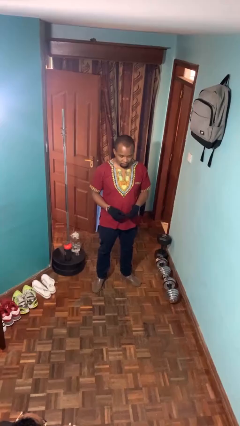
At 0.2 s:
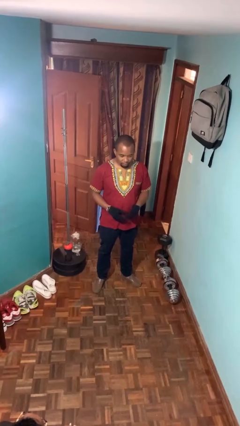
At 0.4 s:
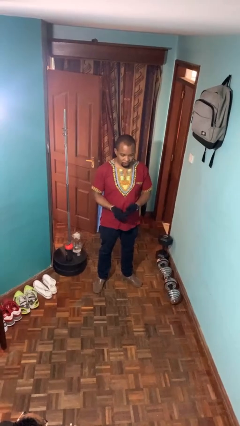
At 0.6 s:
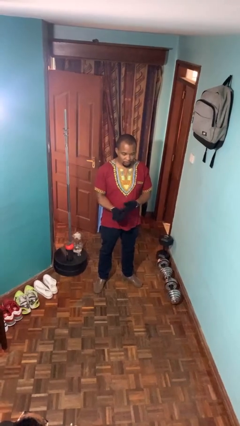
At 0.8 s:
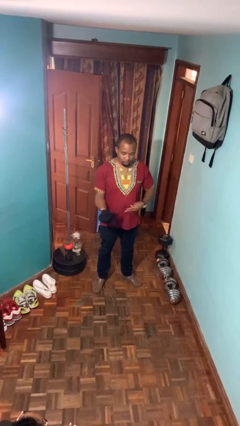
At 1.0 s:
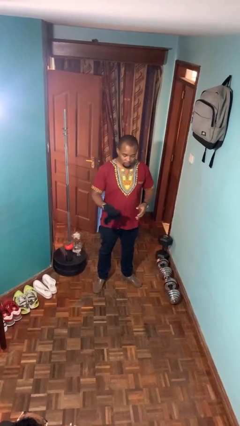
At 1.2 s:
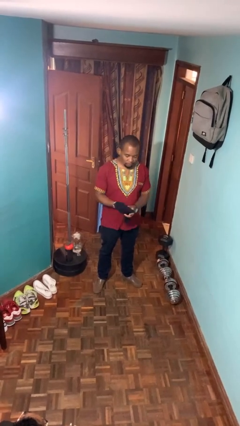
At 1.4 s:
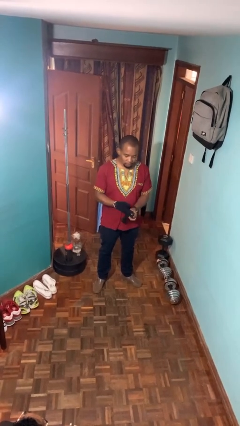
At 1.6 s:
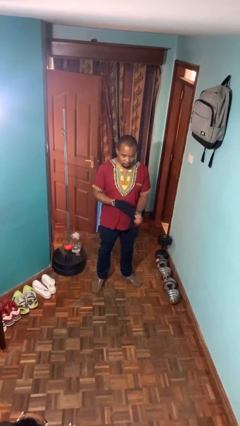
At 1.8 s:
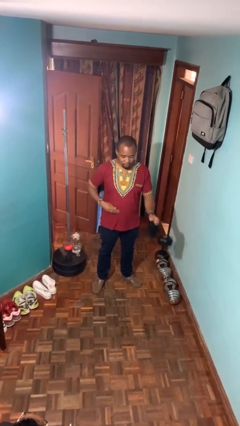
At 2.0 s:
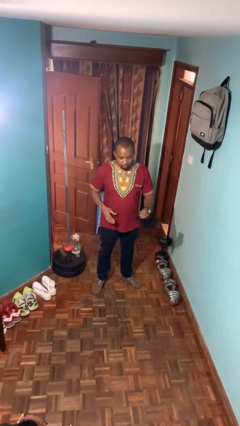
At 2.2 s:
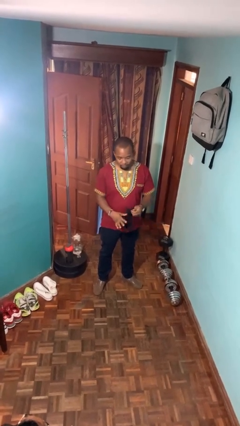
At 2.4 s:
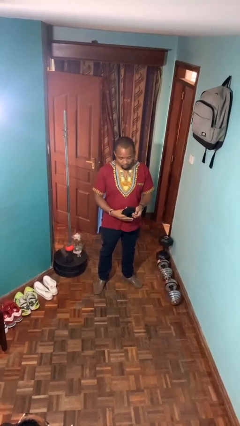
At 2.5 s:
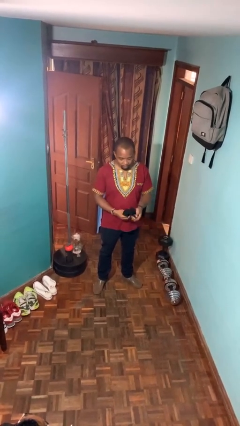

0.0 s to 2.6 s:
person takes off gloves

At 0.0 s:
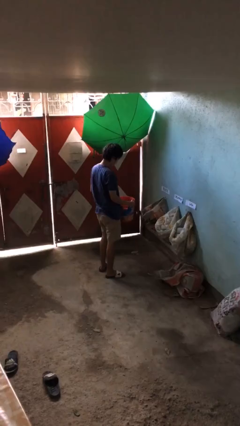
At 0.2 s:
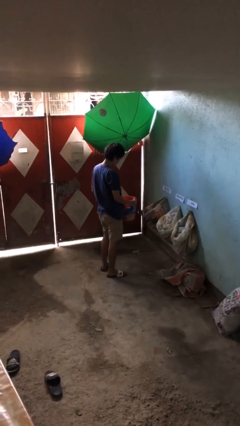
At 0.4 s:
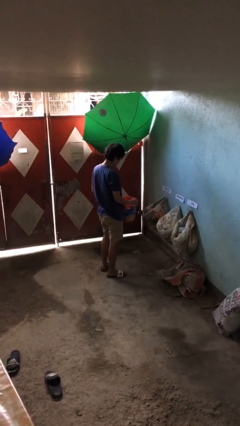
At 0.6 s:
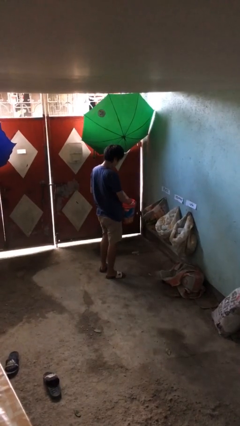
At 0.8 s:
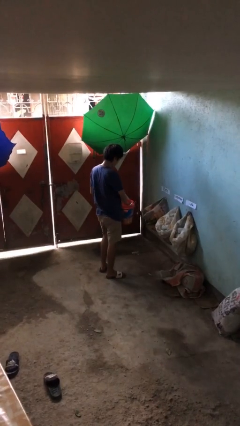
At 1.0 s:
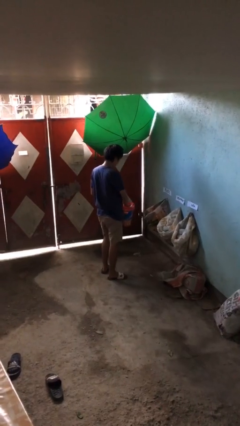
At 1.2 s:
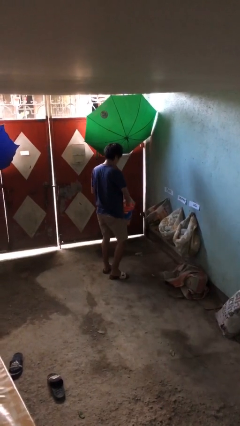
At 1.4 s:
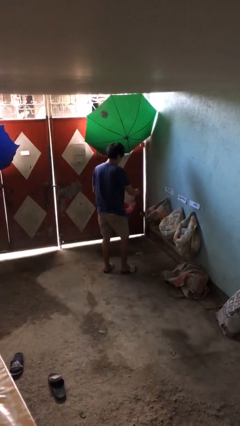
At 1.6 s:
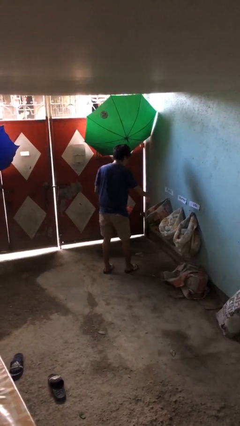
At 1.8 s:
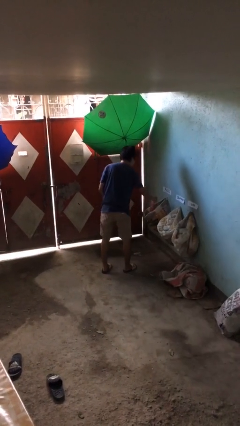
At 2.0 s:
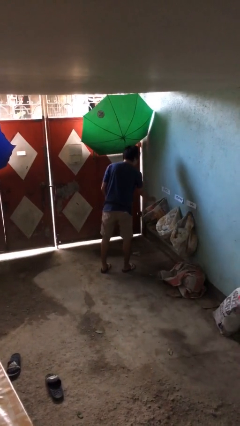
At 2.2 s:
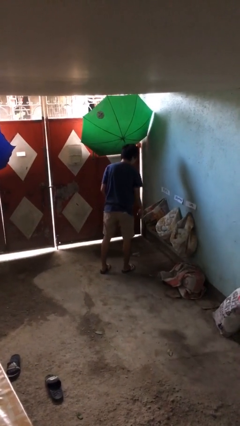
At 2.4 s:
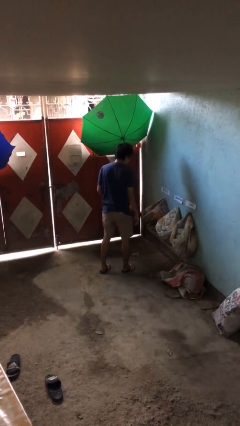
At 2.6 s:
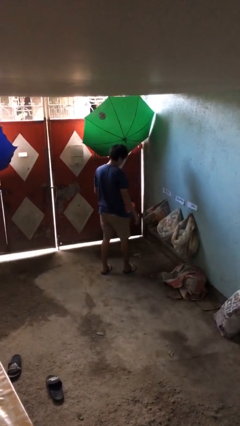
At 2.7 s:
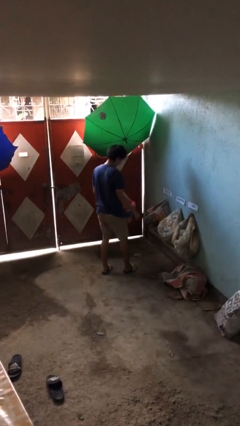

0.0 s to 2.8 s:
person discards trash

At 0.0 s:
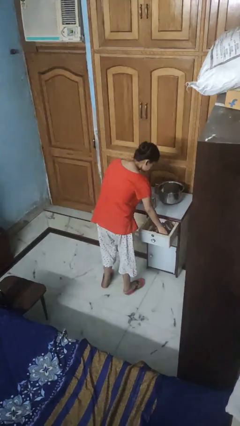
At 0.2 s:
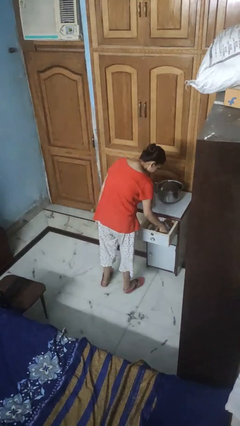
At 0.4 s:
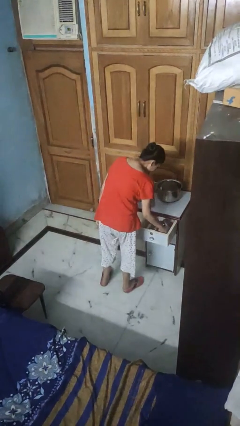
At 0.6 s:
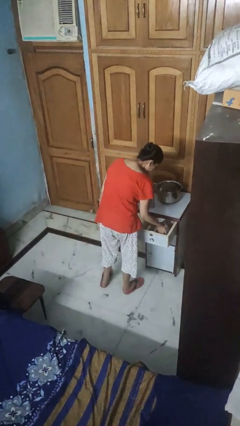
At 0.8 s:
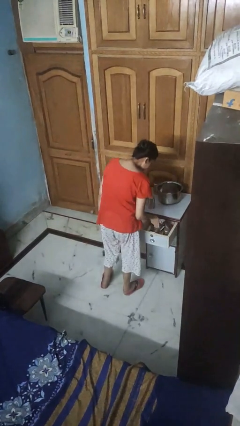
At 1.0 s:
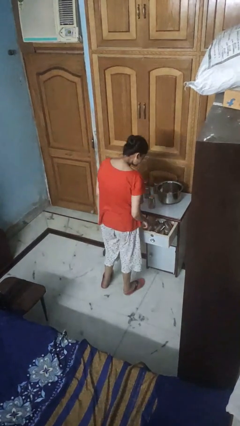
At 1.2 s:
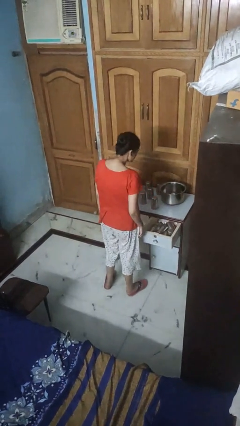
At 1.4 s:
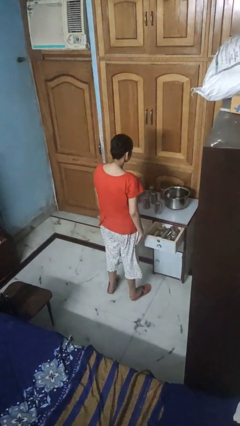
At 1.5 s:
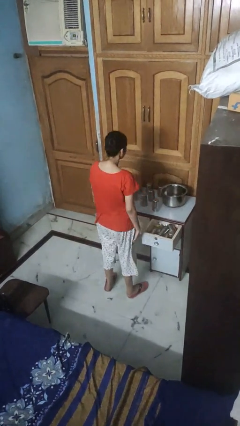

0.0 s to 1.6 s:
person searches in kitchen drawer

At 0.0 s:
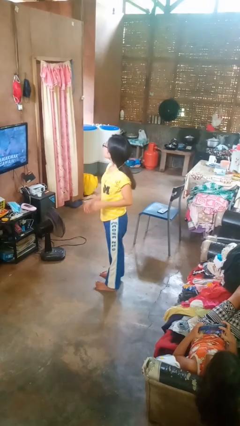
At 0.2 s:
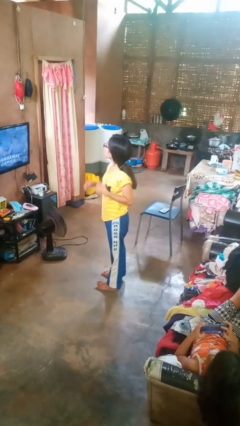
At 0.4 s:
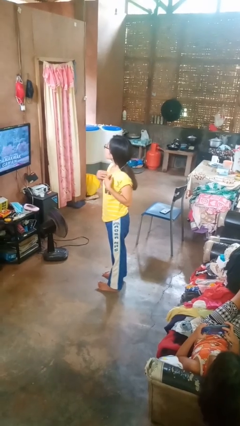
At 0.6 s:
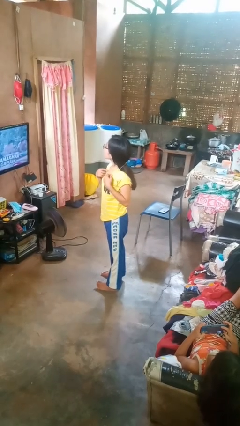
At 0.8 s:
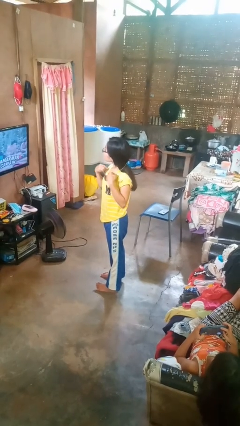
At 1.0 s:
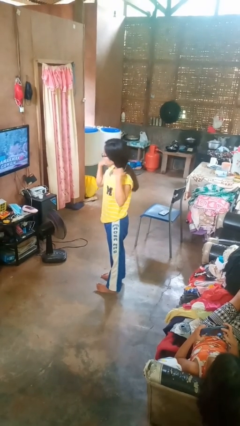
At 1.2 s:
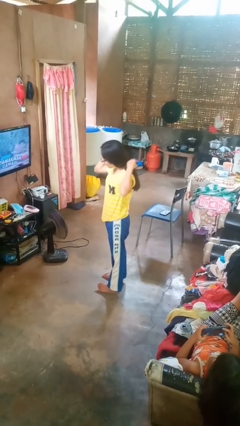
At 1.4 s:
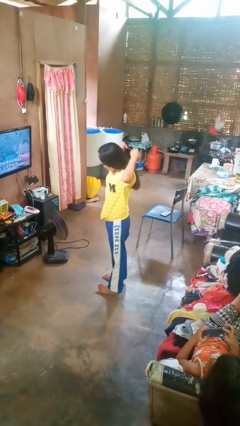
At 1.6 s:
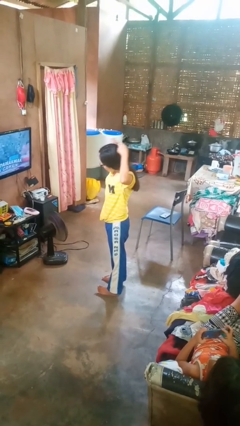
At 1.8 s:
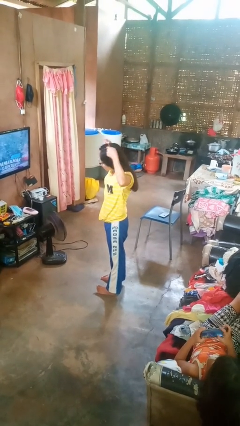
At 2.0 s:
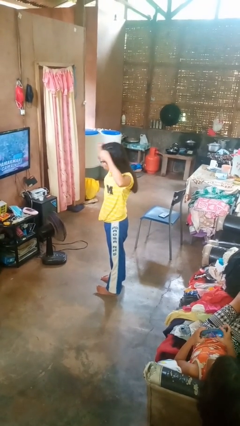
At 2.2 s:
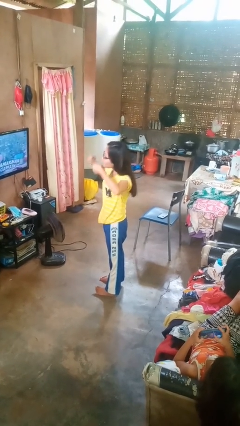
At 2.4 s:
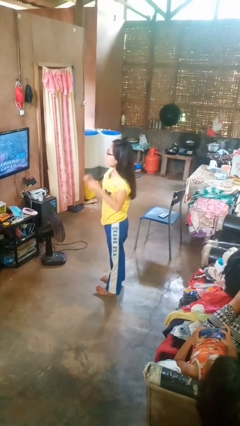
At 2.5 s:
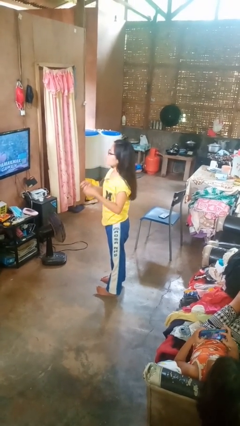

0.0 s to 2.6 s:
person takes off necklace

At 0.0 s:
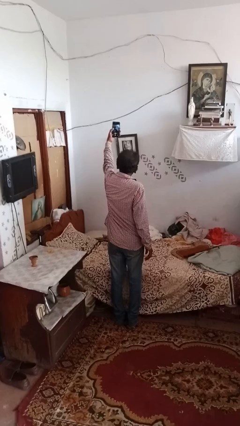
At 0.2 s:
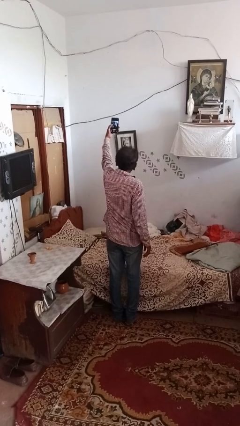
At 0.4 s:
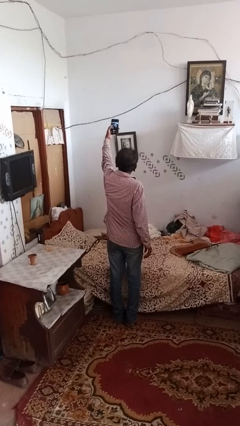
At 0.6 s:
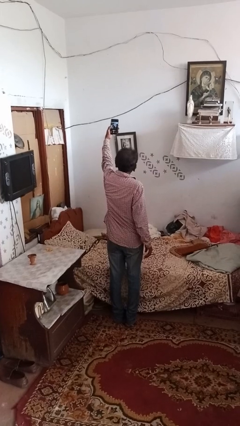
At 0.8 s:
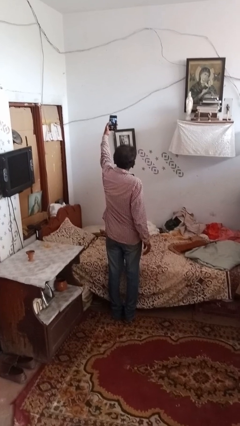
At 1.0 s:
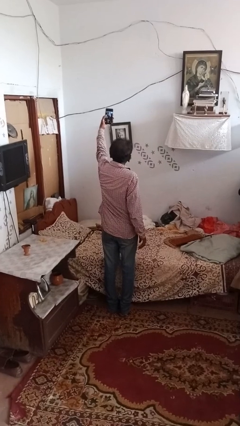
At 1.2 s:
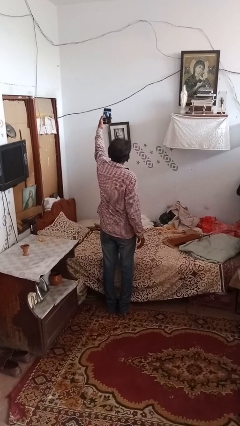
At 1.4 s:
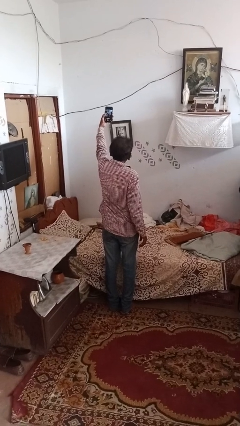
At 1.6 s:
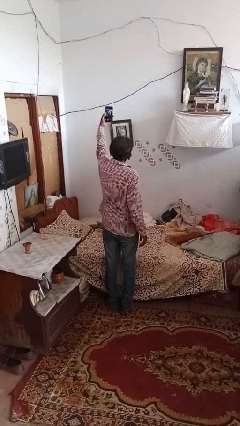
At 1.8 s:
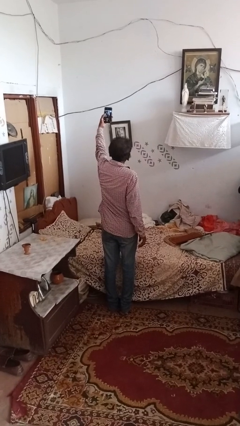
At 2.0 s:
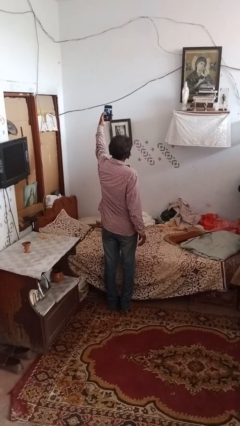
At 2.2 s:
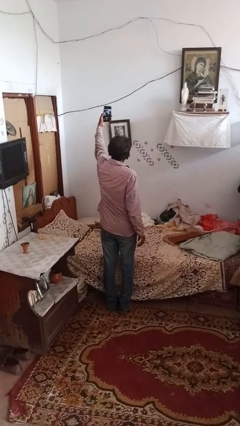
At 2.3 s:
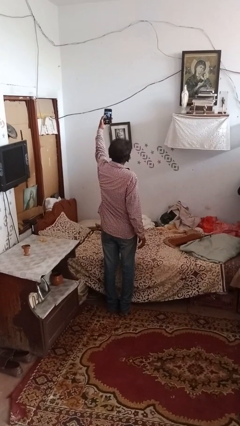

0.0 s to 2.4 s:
person takes selfie

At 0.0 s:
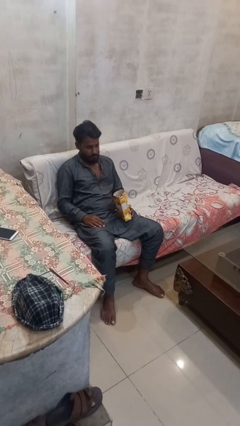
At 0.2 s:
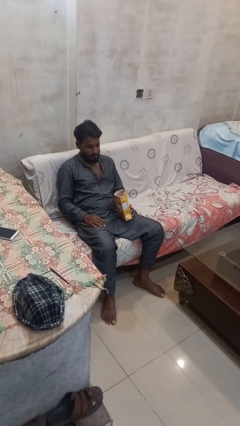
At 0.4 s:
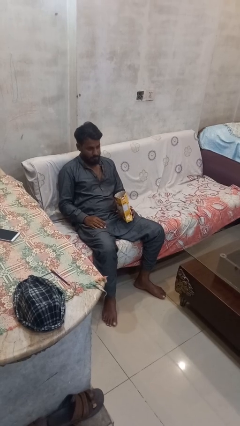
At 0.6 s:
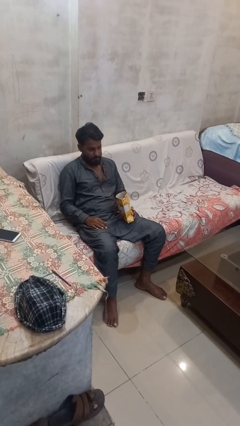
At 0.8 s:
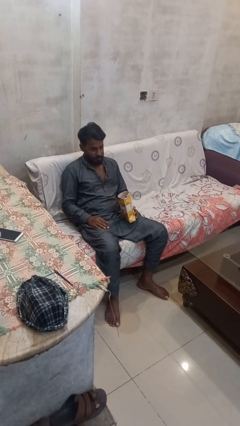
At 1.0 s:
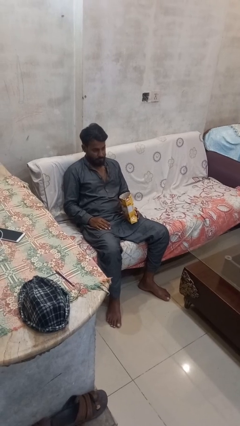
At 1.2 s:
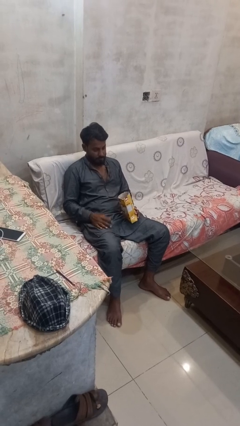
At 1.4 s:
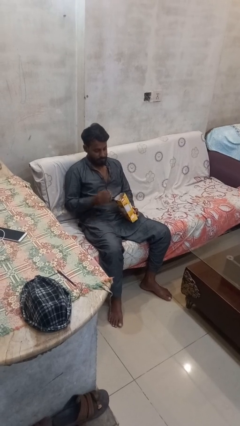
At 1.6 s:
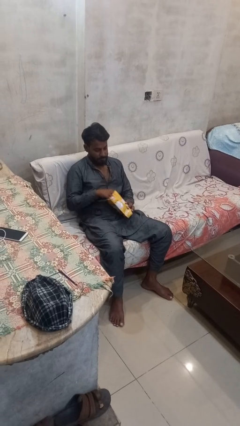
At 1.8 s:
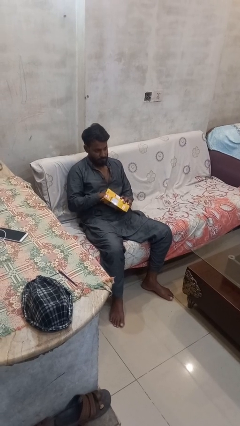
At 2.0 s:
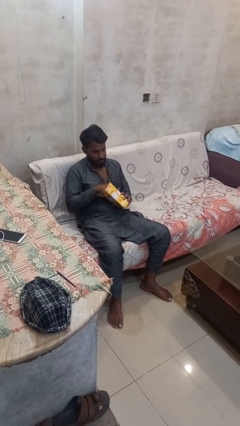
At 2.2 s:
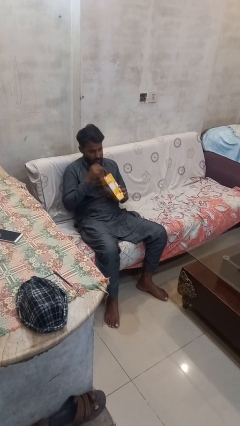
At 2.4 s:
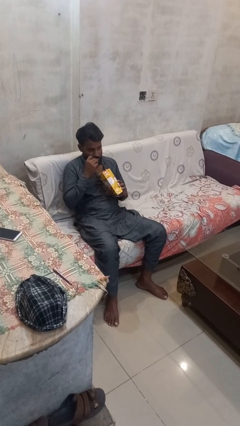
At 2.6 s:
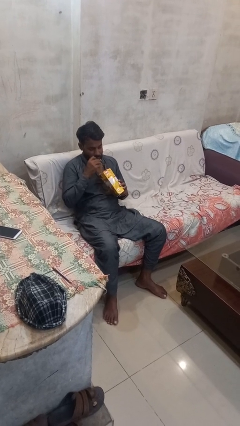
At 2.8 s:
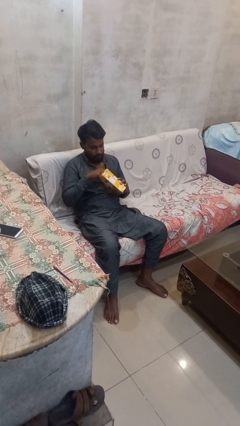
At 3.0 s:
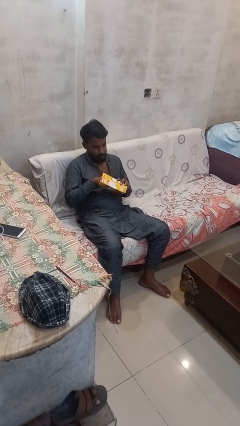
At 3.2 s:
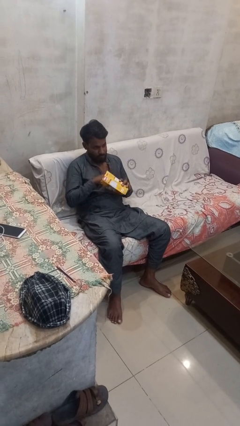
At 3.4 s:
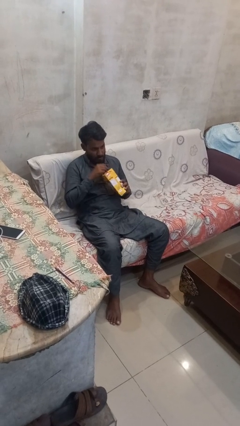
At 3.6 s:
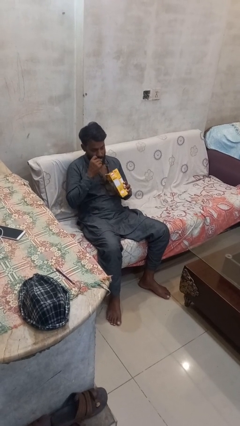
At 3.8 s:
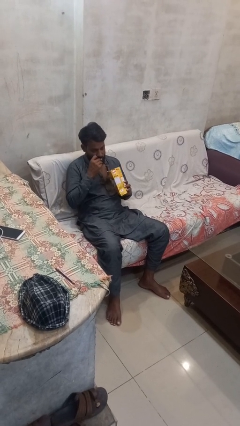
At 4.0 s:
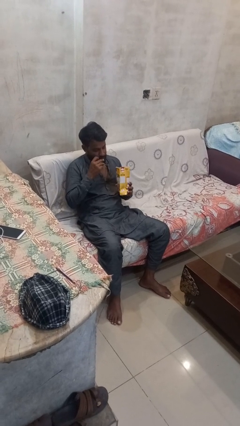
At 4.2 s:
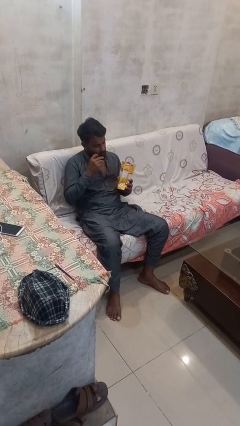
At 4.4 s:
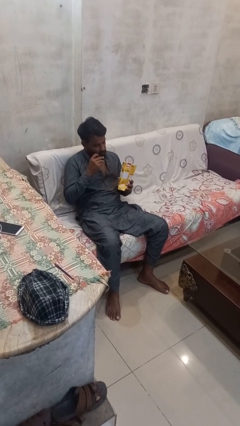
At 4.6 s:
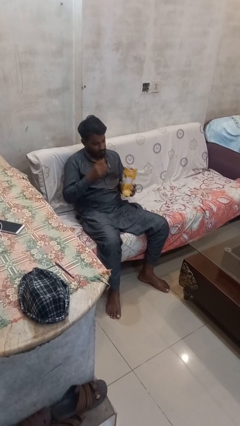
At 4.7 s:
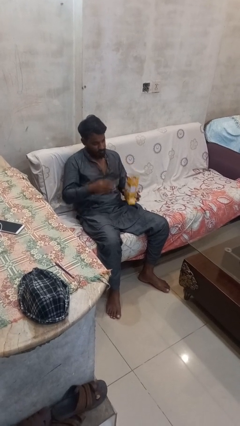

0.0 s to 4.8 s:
person eats snack from bag

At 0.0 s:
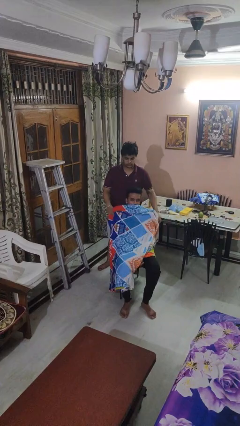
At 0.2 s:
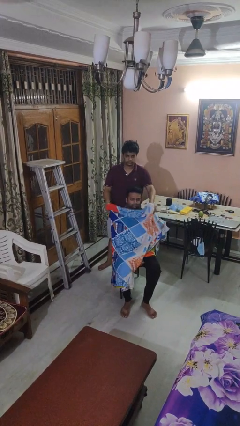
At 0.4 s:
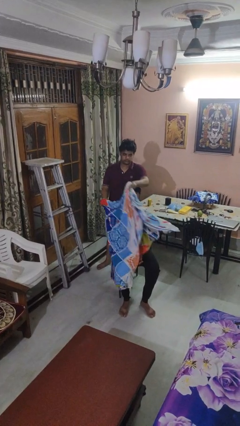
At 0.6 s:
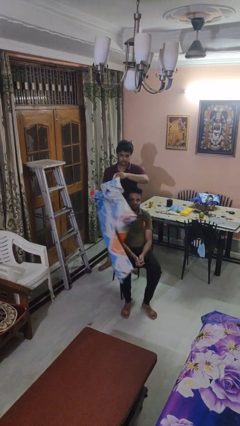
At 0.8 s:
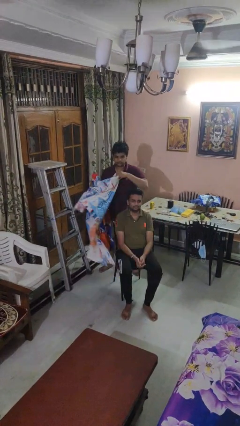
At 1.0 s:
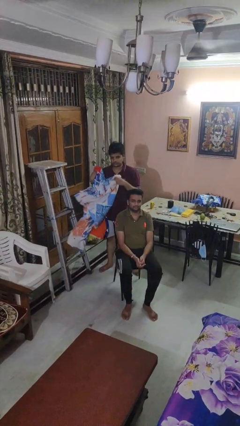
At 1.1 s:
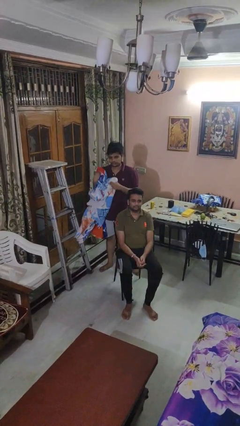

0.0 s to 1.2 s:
person uncovers friend with blanket
